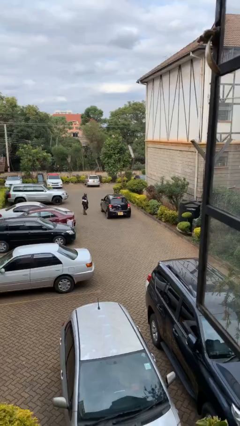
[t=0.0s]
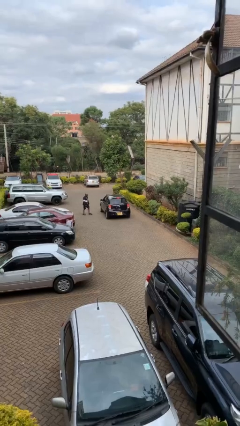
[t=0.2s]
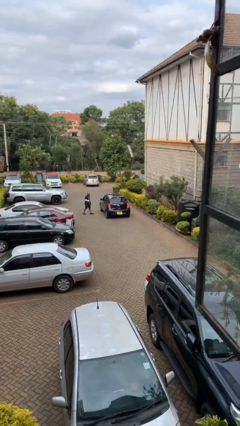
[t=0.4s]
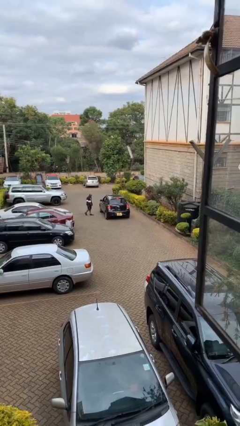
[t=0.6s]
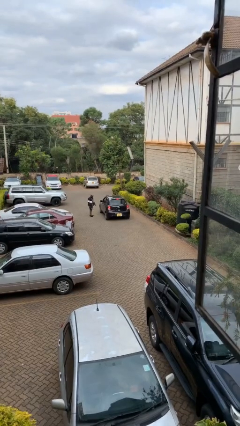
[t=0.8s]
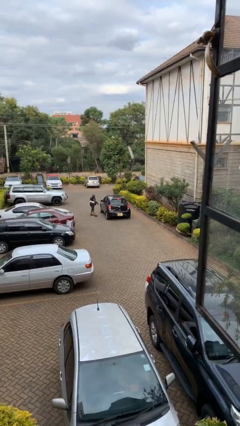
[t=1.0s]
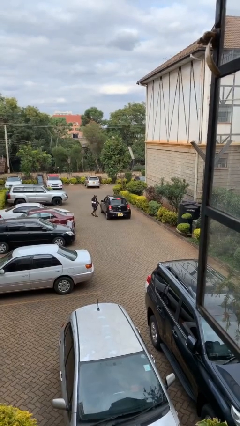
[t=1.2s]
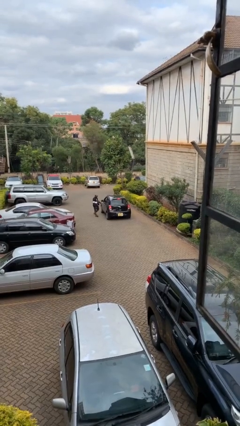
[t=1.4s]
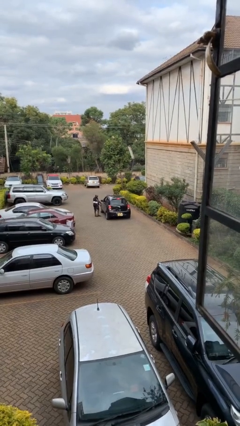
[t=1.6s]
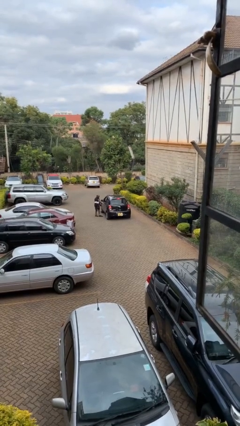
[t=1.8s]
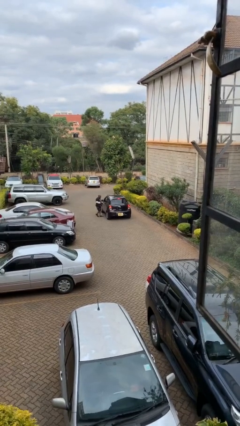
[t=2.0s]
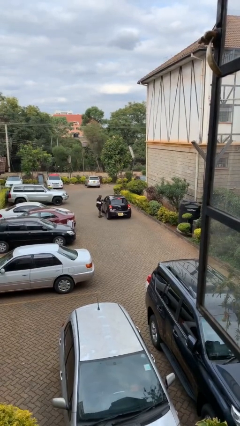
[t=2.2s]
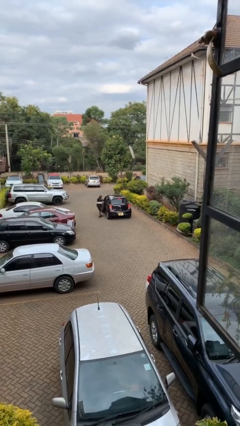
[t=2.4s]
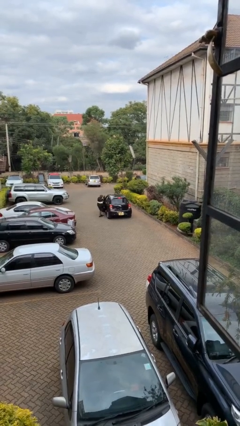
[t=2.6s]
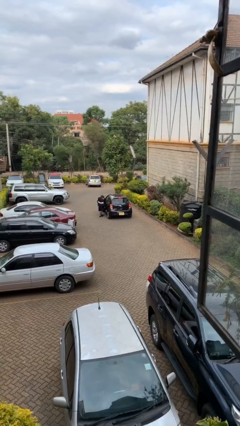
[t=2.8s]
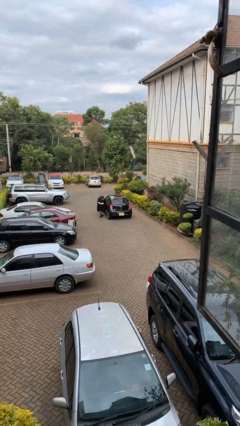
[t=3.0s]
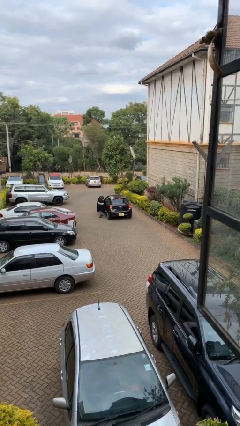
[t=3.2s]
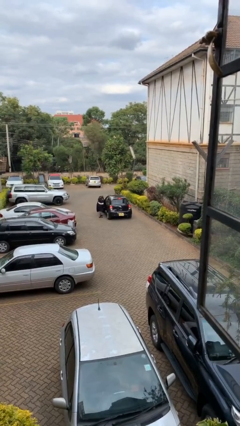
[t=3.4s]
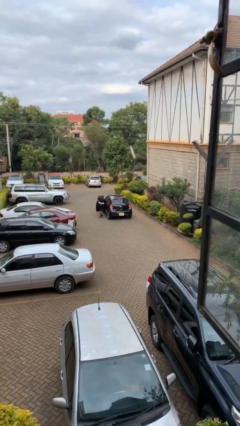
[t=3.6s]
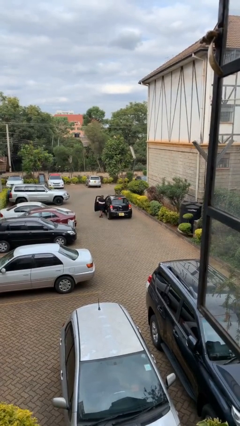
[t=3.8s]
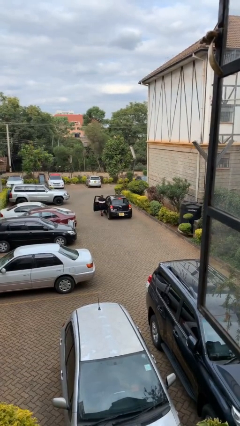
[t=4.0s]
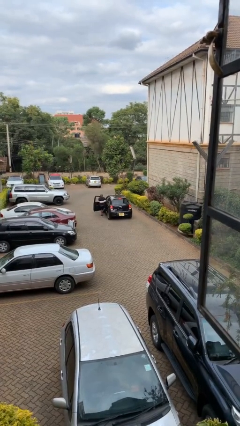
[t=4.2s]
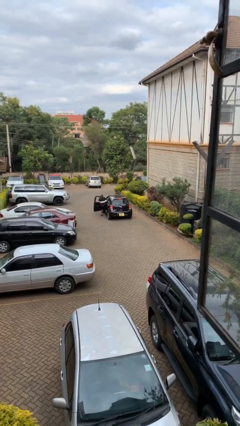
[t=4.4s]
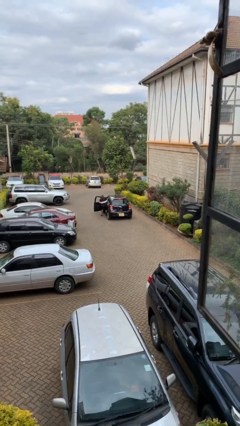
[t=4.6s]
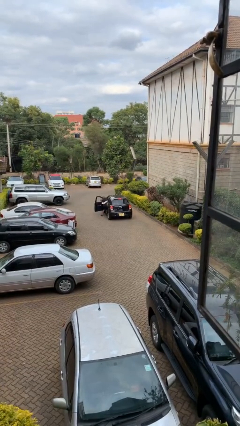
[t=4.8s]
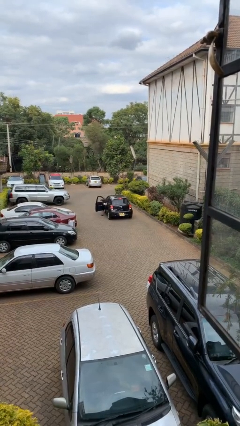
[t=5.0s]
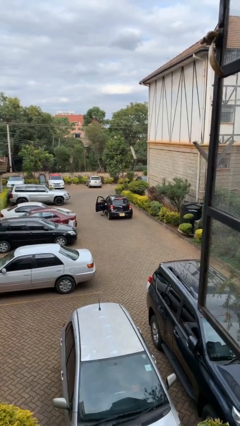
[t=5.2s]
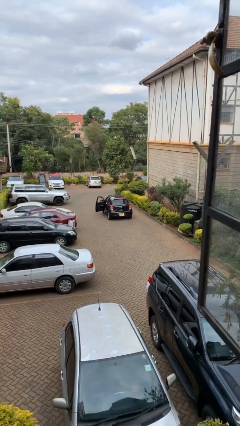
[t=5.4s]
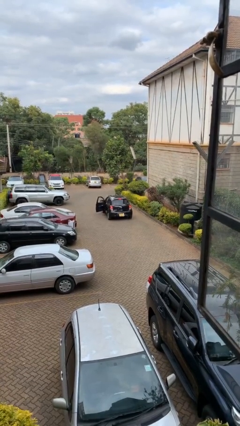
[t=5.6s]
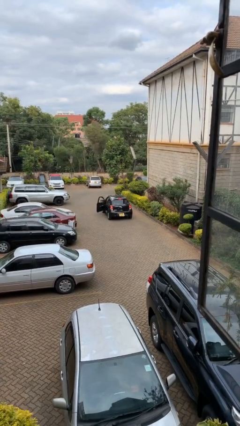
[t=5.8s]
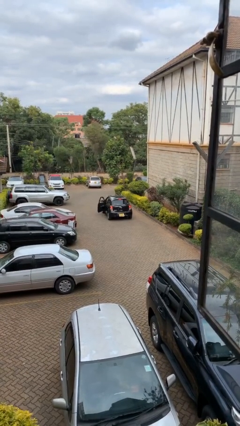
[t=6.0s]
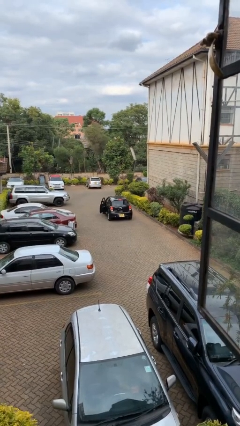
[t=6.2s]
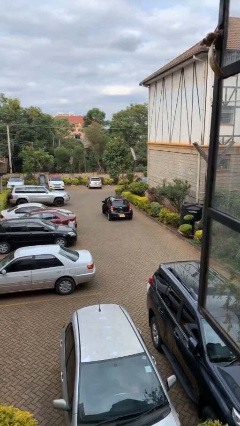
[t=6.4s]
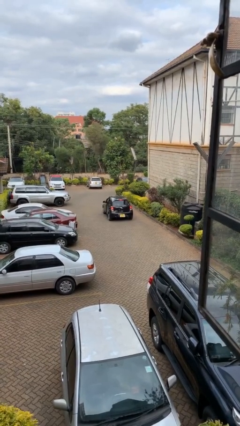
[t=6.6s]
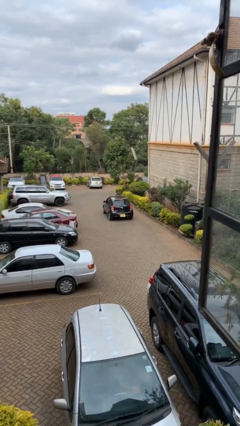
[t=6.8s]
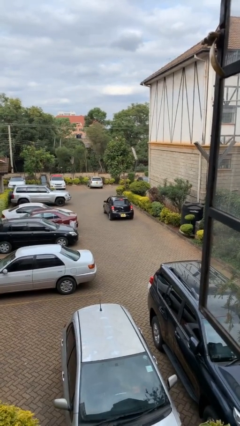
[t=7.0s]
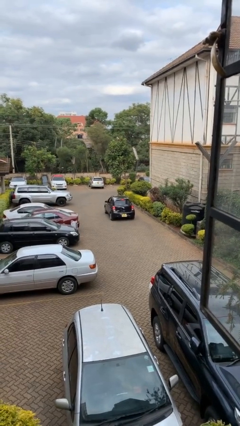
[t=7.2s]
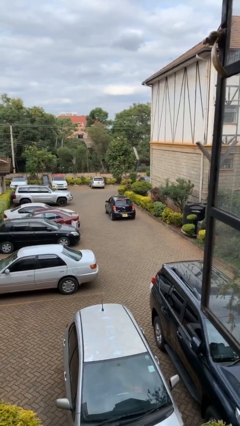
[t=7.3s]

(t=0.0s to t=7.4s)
car picks up person

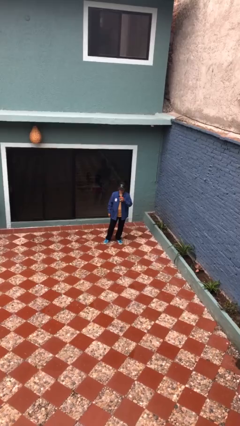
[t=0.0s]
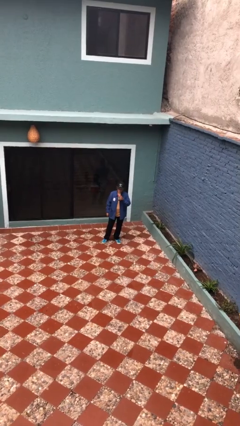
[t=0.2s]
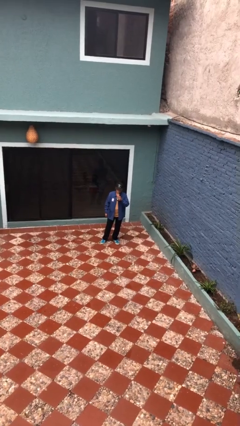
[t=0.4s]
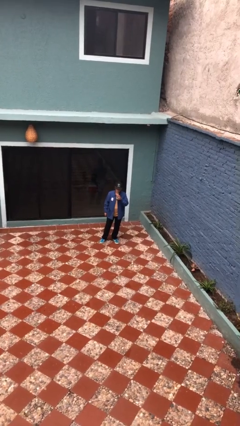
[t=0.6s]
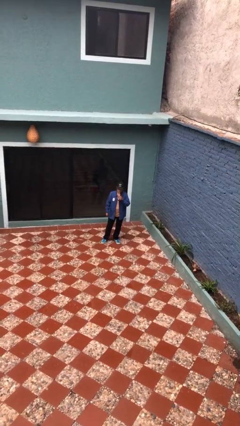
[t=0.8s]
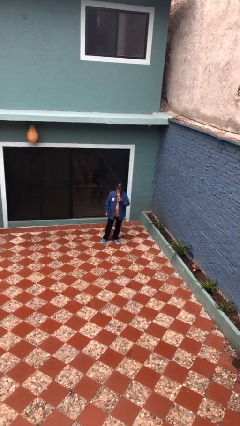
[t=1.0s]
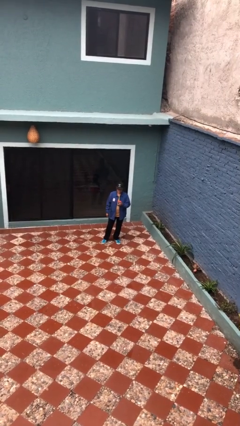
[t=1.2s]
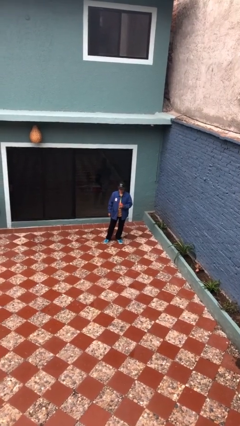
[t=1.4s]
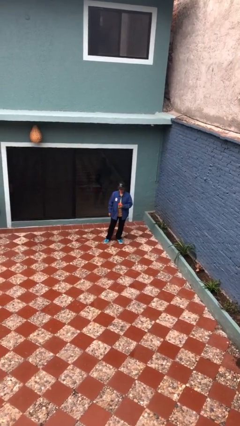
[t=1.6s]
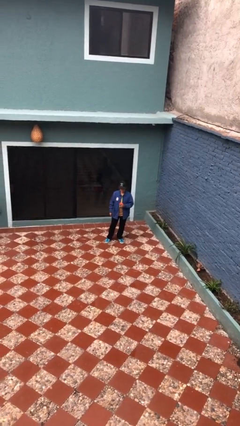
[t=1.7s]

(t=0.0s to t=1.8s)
person drinks from straw

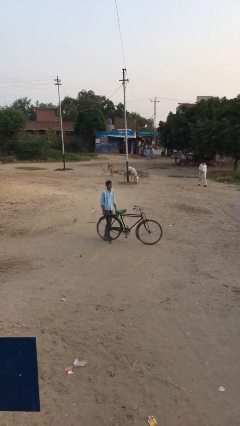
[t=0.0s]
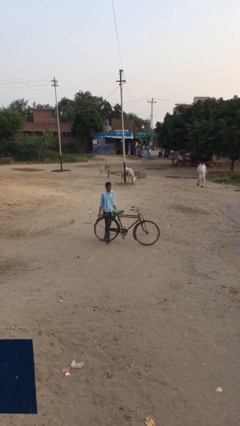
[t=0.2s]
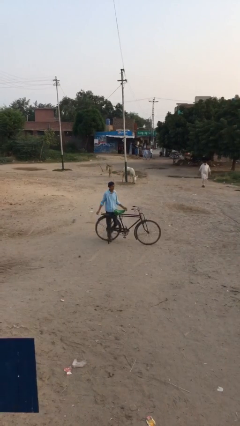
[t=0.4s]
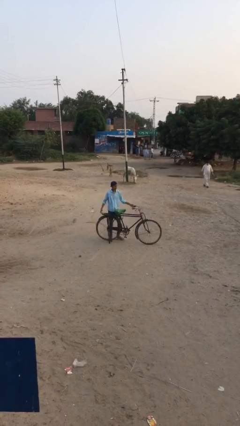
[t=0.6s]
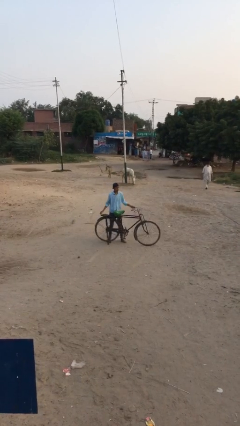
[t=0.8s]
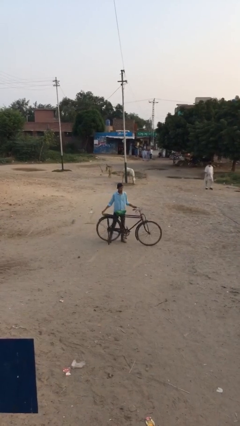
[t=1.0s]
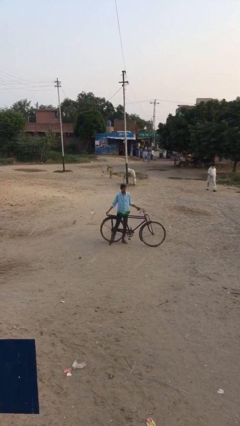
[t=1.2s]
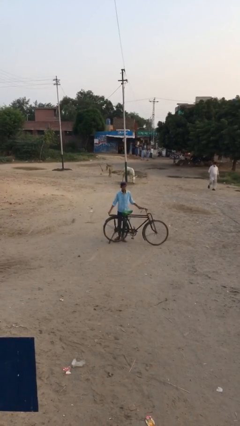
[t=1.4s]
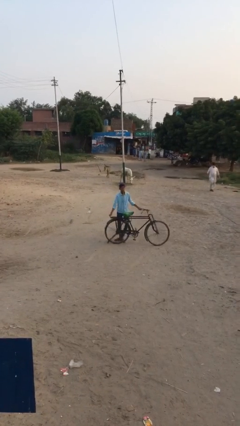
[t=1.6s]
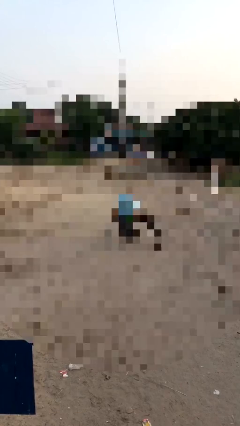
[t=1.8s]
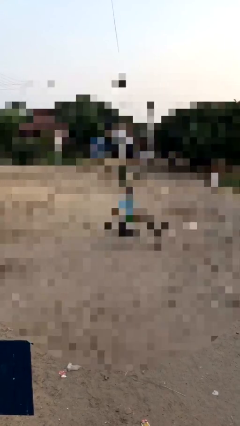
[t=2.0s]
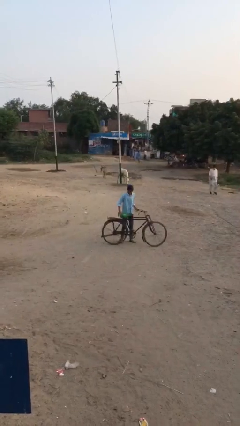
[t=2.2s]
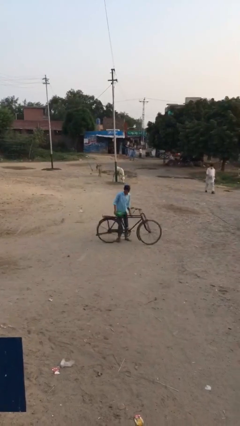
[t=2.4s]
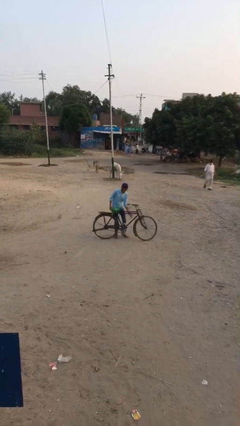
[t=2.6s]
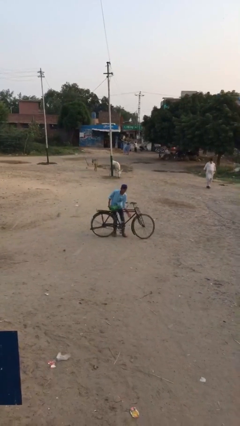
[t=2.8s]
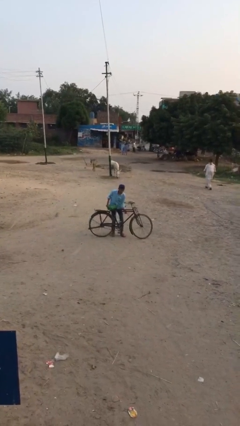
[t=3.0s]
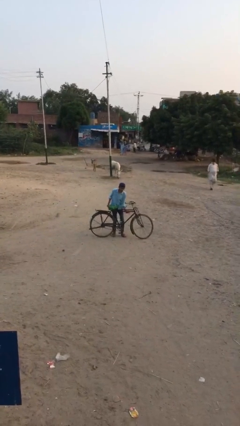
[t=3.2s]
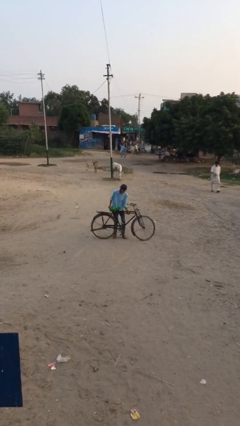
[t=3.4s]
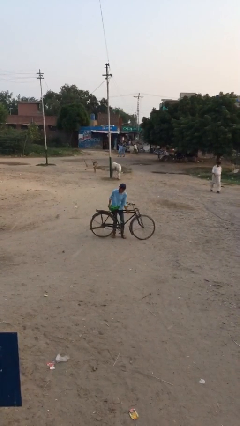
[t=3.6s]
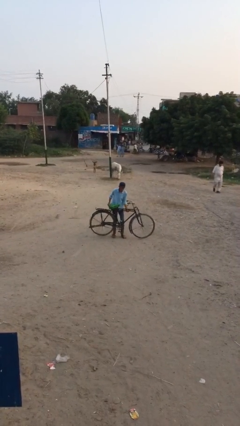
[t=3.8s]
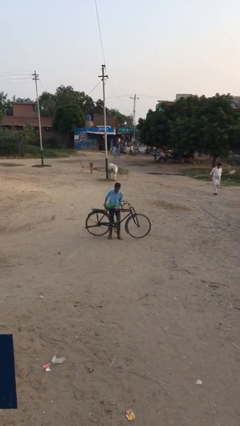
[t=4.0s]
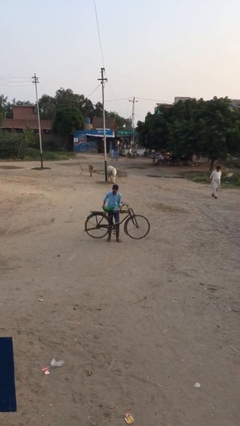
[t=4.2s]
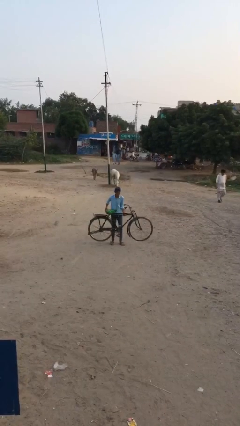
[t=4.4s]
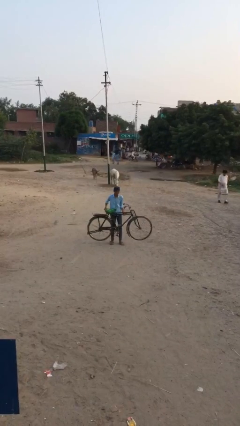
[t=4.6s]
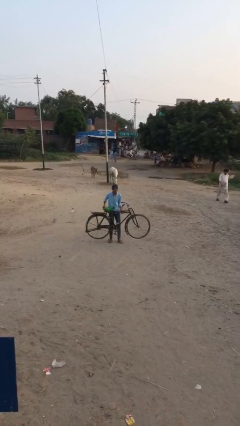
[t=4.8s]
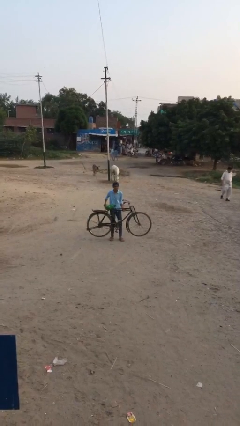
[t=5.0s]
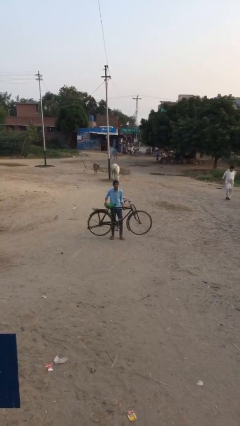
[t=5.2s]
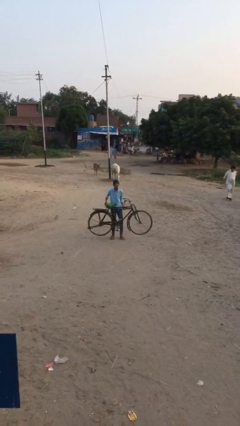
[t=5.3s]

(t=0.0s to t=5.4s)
person picks up object from floor

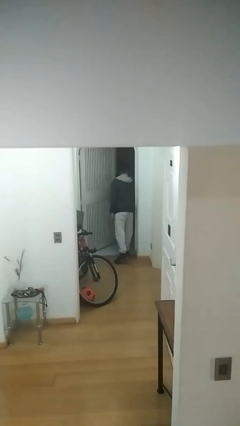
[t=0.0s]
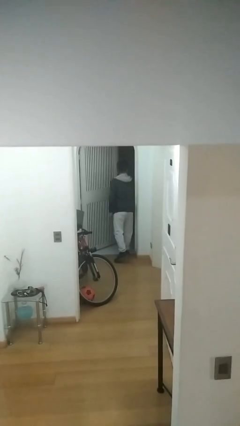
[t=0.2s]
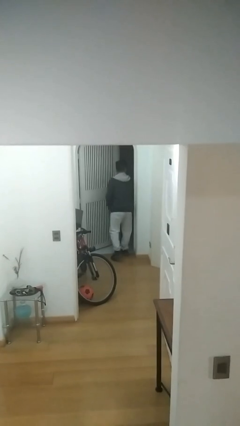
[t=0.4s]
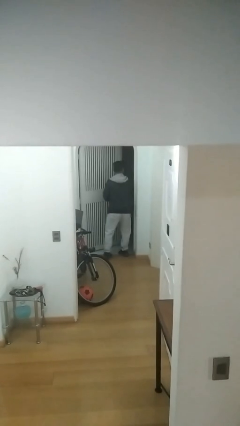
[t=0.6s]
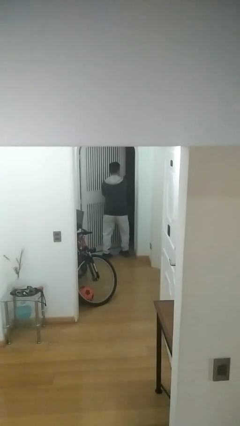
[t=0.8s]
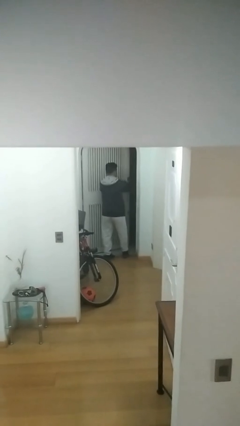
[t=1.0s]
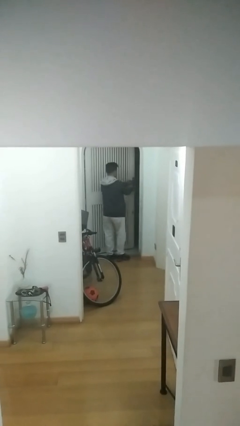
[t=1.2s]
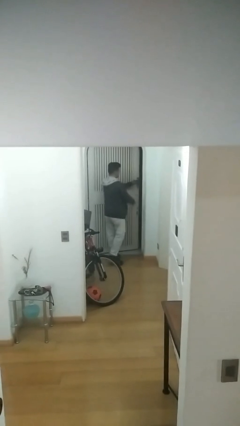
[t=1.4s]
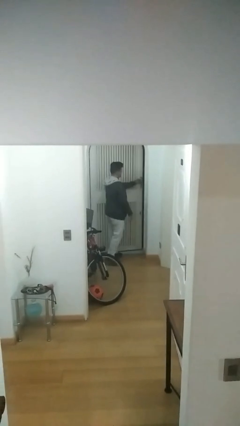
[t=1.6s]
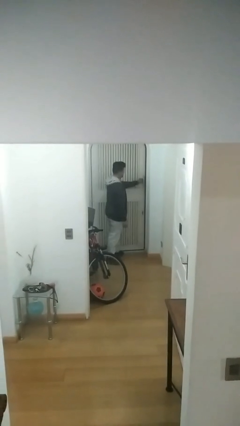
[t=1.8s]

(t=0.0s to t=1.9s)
person closes facility door

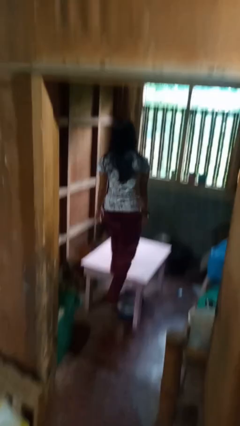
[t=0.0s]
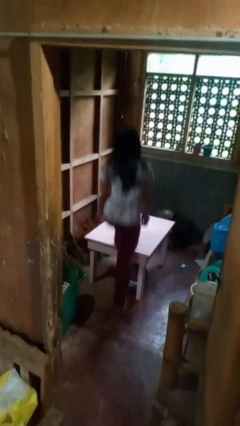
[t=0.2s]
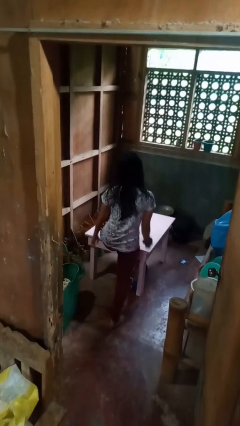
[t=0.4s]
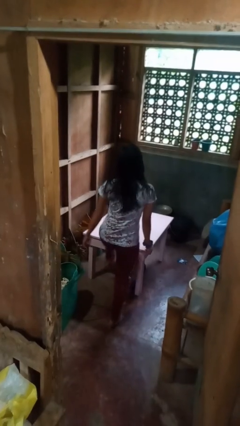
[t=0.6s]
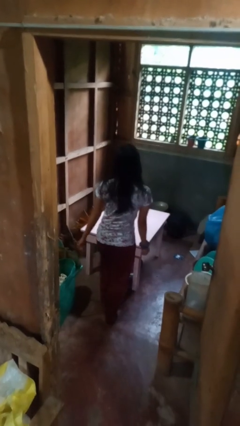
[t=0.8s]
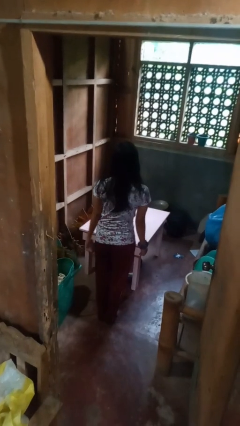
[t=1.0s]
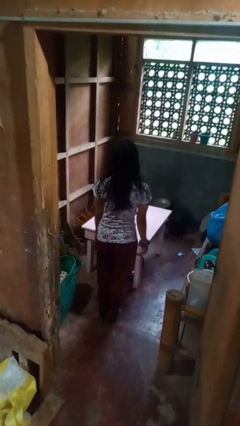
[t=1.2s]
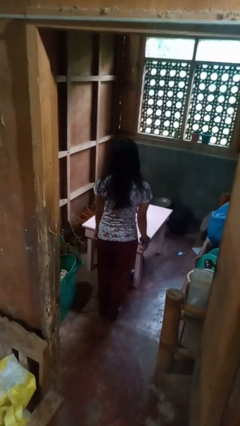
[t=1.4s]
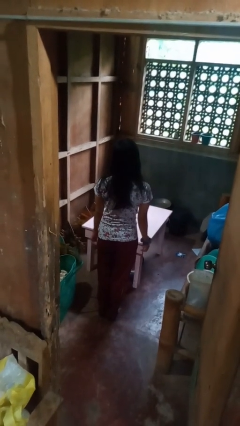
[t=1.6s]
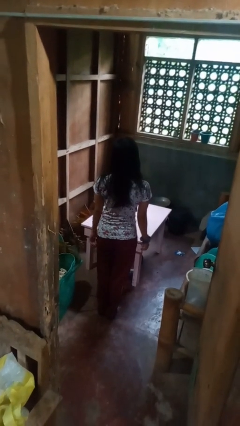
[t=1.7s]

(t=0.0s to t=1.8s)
person climbs off table
